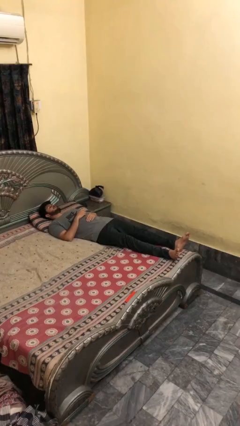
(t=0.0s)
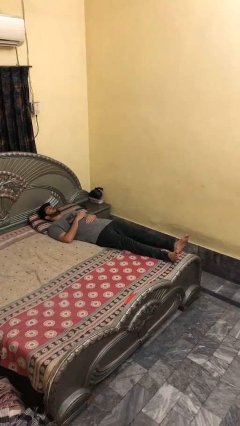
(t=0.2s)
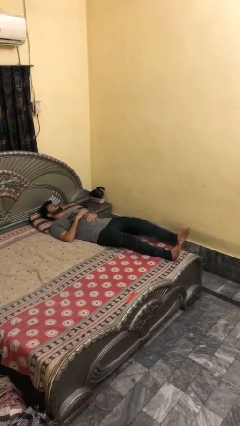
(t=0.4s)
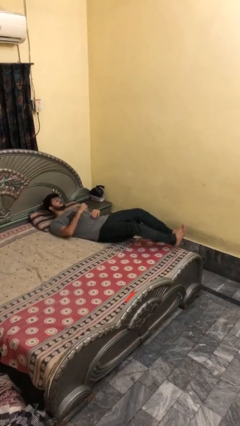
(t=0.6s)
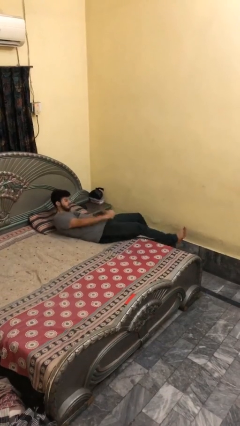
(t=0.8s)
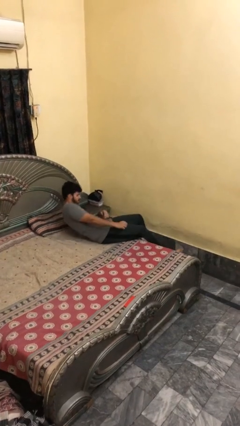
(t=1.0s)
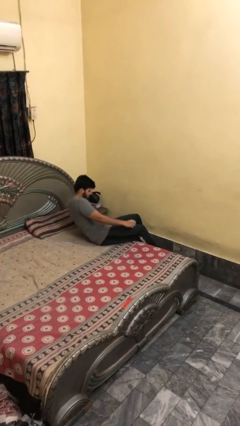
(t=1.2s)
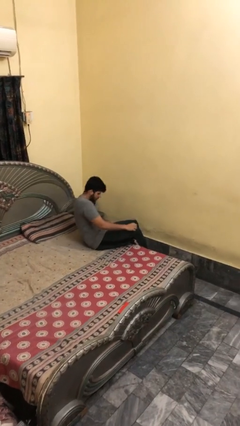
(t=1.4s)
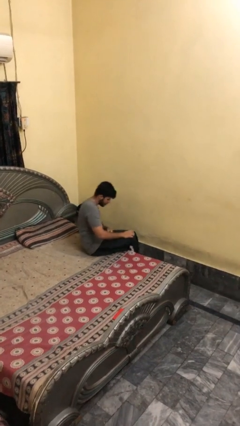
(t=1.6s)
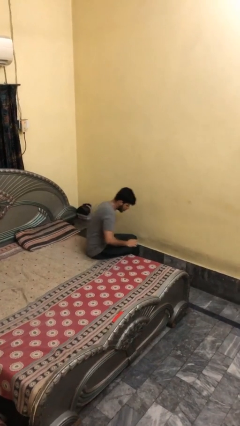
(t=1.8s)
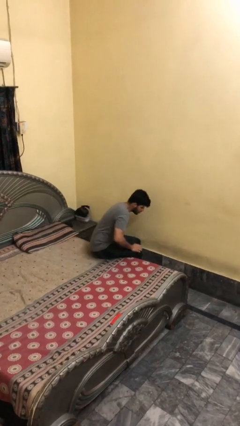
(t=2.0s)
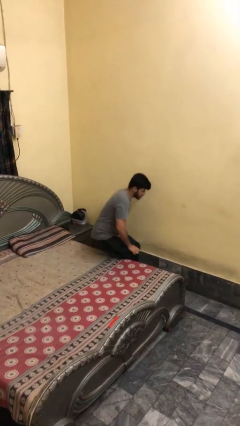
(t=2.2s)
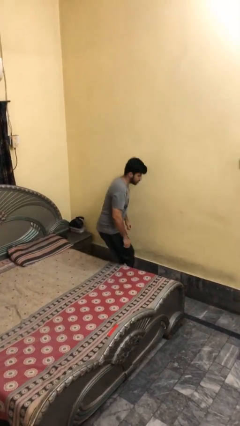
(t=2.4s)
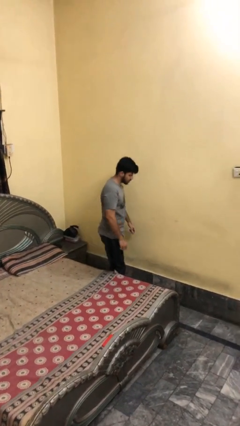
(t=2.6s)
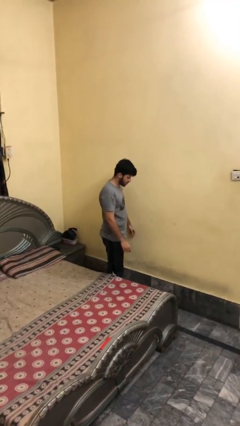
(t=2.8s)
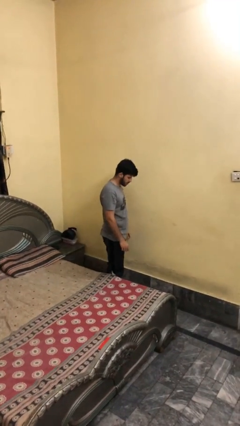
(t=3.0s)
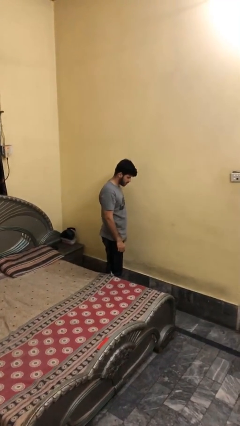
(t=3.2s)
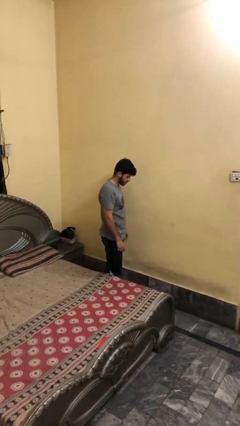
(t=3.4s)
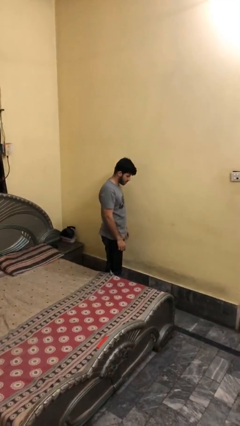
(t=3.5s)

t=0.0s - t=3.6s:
person stands up

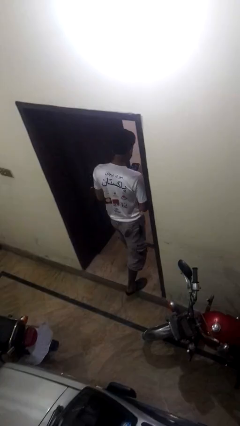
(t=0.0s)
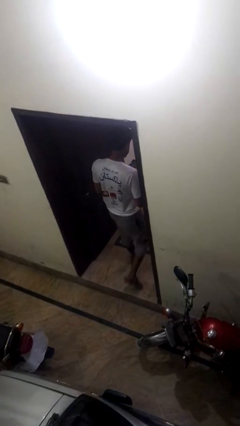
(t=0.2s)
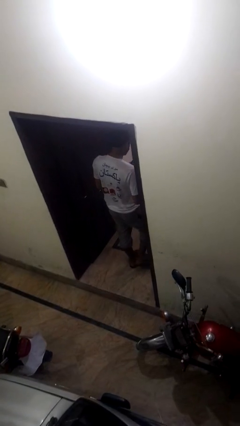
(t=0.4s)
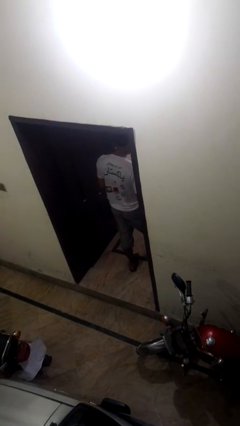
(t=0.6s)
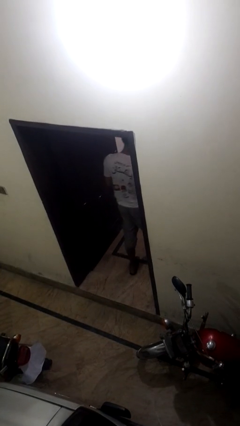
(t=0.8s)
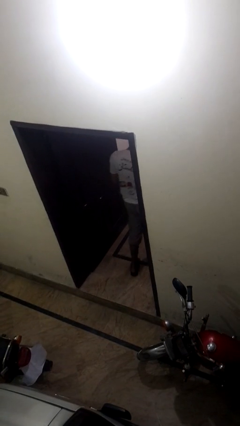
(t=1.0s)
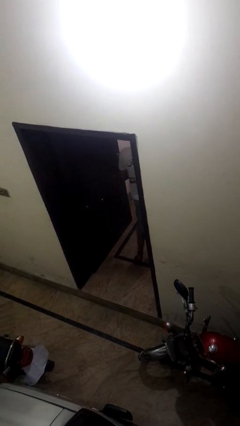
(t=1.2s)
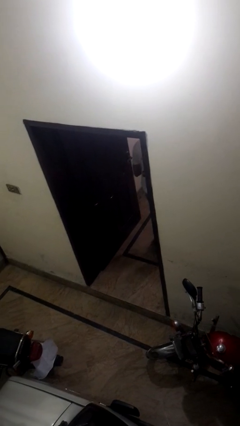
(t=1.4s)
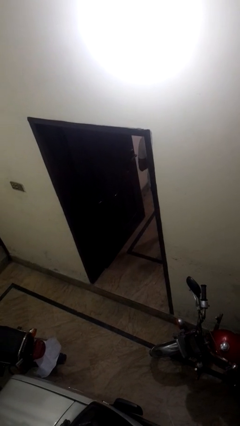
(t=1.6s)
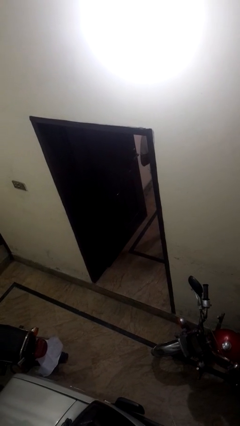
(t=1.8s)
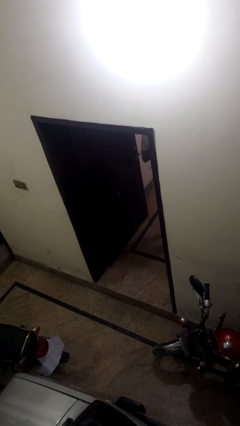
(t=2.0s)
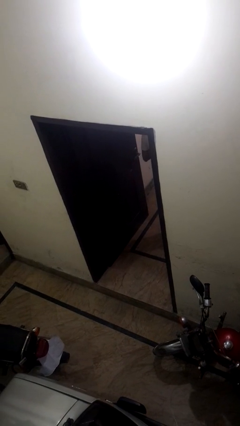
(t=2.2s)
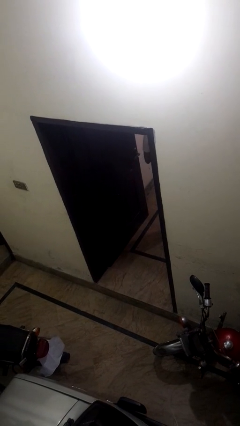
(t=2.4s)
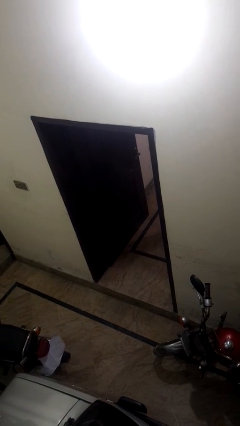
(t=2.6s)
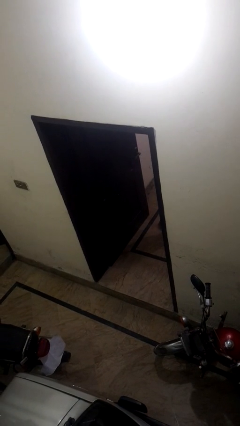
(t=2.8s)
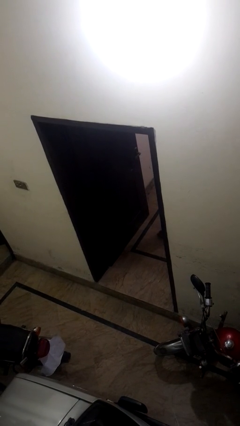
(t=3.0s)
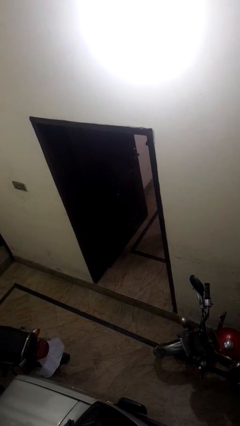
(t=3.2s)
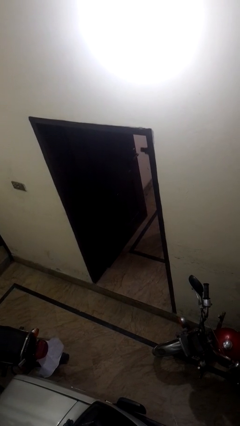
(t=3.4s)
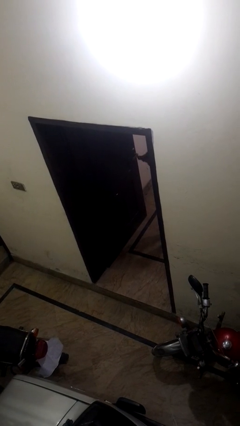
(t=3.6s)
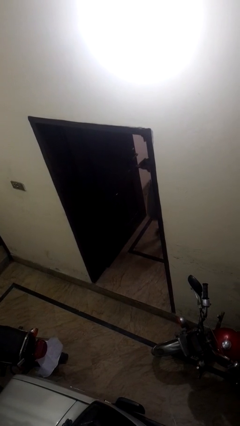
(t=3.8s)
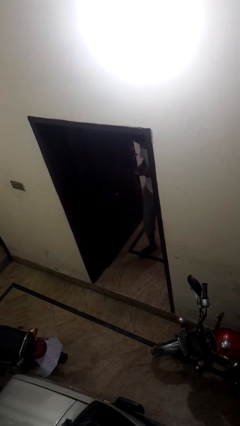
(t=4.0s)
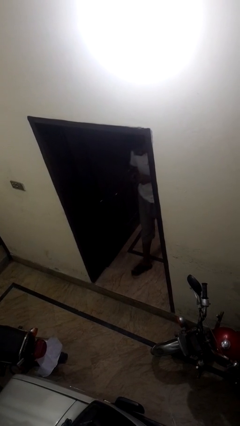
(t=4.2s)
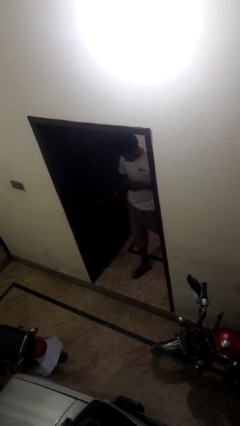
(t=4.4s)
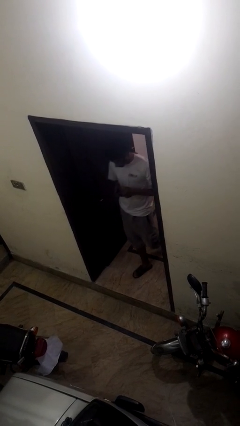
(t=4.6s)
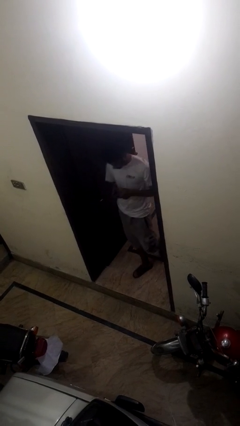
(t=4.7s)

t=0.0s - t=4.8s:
person exits scene through structure

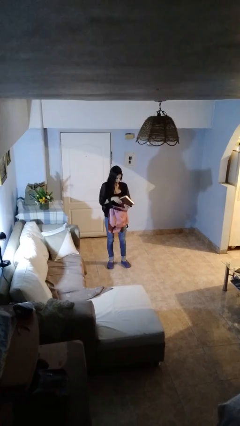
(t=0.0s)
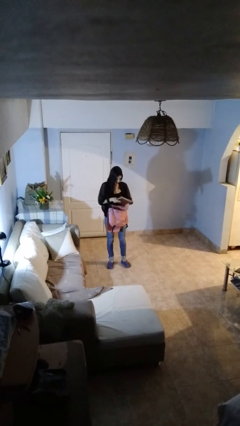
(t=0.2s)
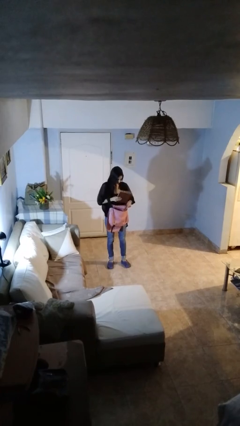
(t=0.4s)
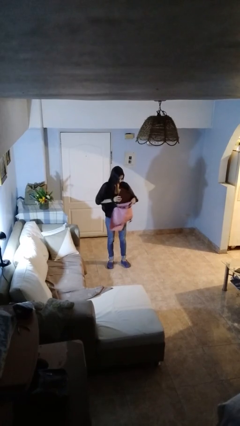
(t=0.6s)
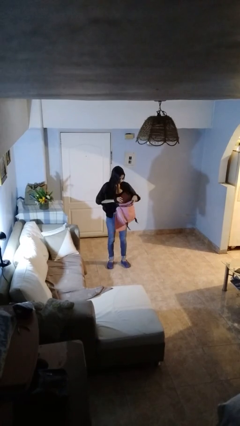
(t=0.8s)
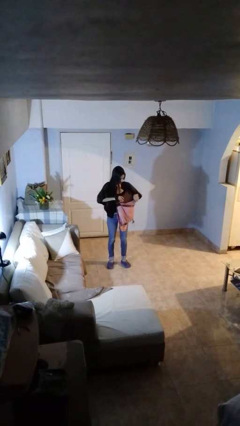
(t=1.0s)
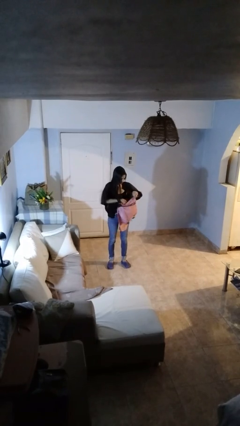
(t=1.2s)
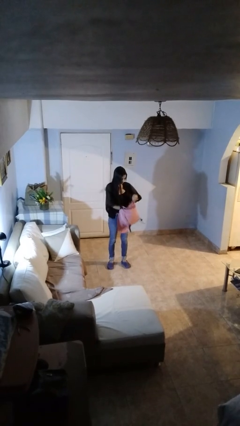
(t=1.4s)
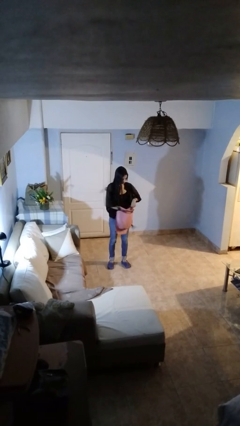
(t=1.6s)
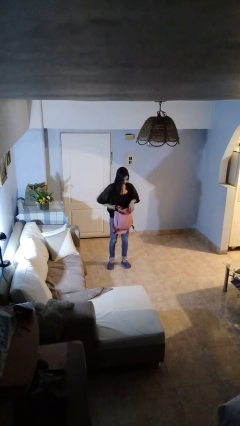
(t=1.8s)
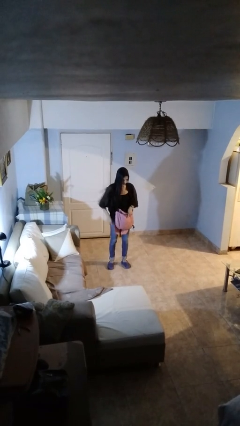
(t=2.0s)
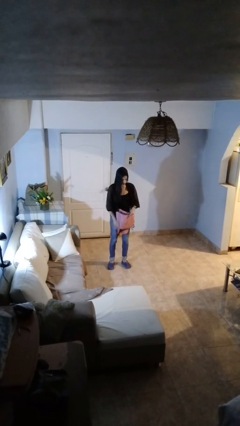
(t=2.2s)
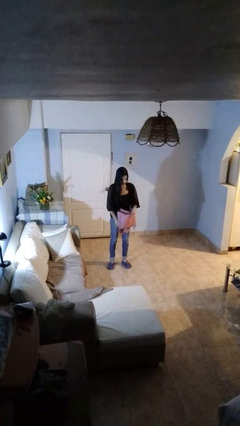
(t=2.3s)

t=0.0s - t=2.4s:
person puts object into backpack

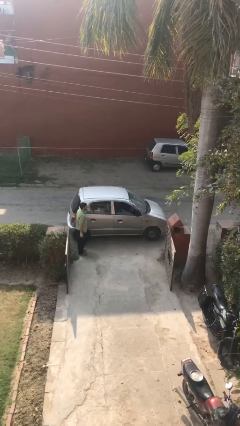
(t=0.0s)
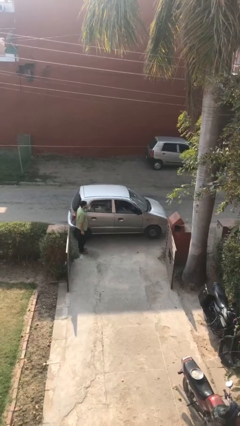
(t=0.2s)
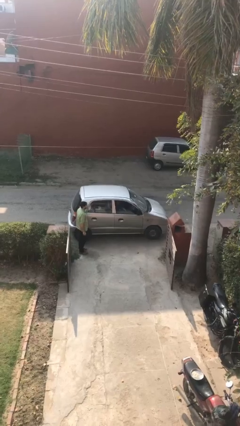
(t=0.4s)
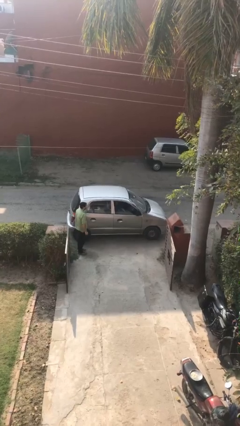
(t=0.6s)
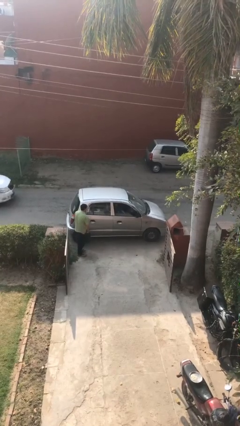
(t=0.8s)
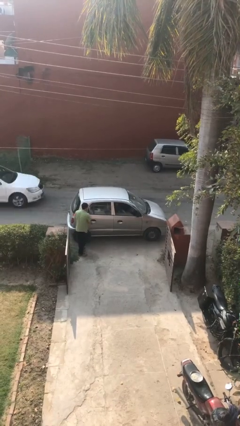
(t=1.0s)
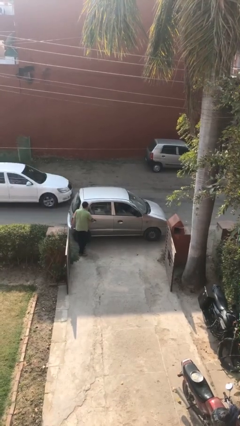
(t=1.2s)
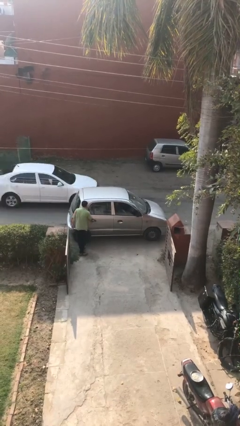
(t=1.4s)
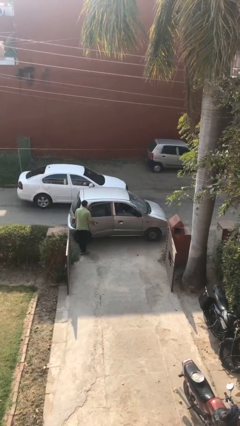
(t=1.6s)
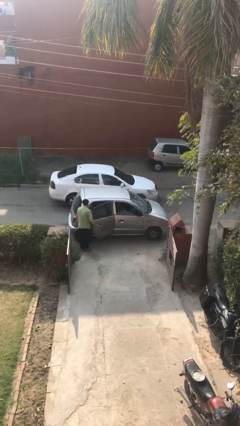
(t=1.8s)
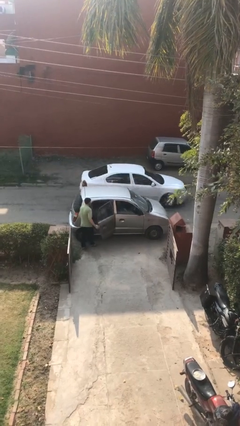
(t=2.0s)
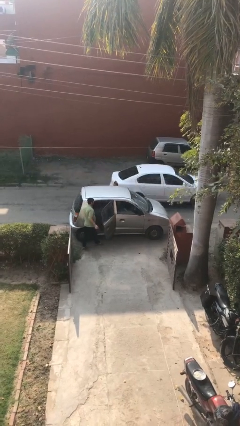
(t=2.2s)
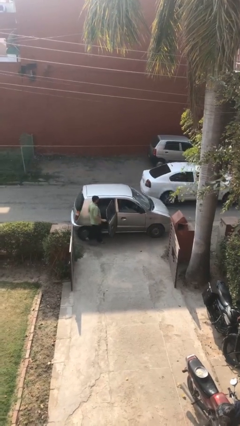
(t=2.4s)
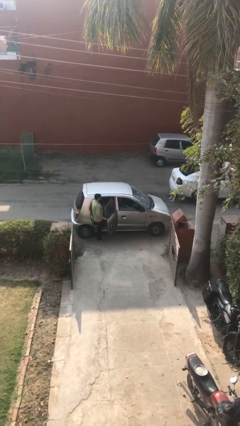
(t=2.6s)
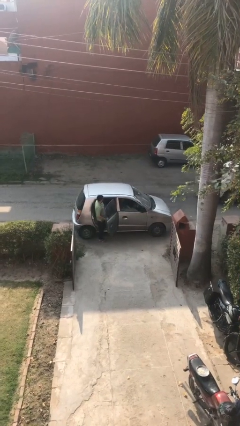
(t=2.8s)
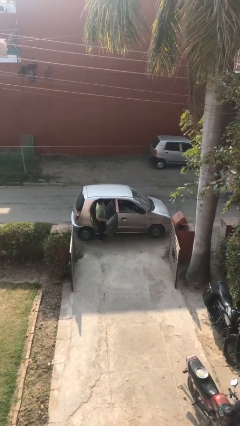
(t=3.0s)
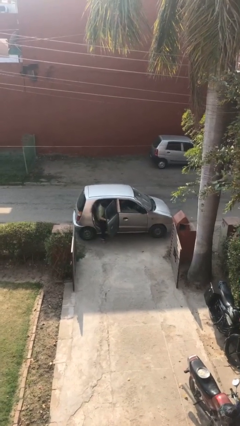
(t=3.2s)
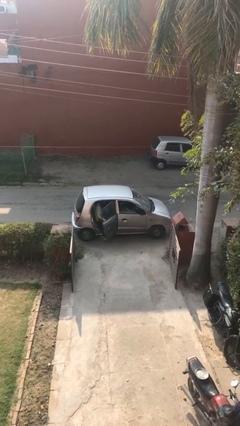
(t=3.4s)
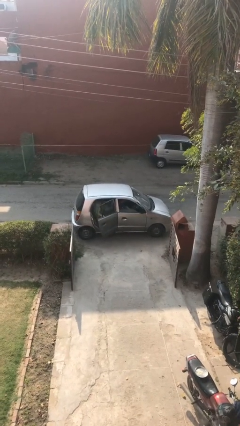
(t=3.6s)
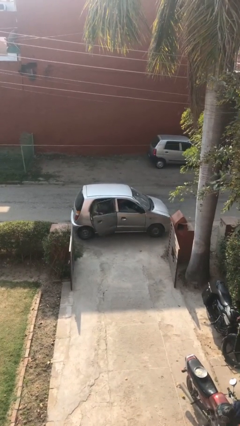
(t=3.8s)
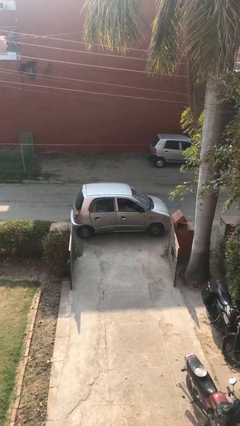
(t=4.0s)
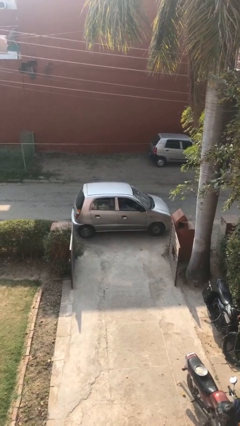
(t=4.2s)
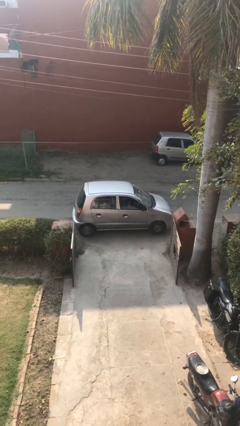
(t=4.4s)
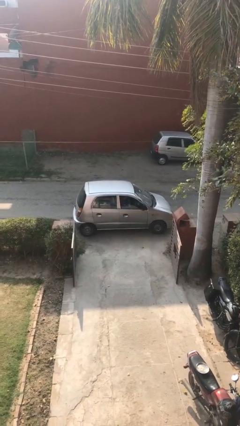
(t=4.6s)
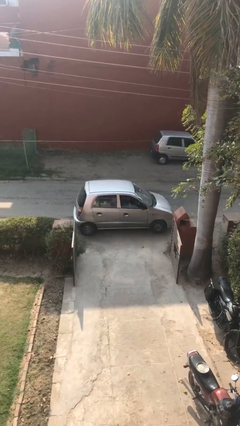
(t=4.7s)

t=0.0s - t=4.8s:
car picks up person

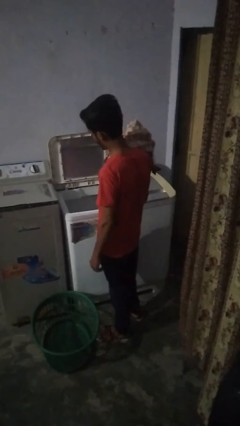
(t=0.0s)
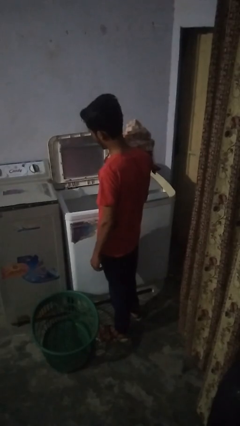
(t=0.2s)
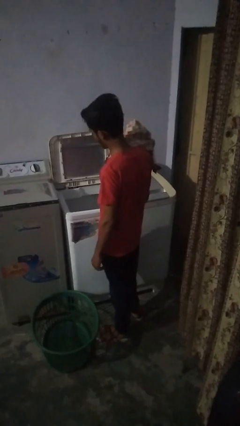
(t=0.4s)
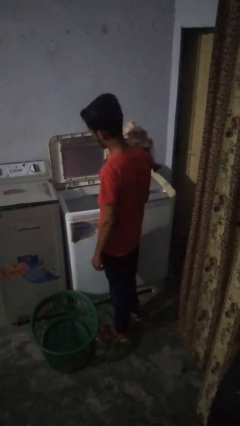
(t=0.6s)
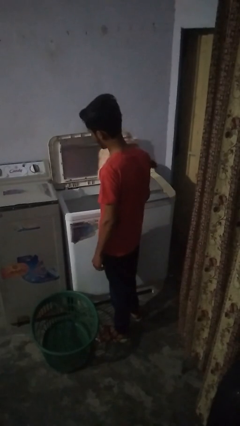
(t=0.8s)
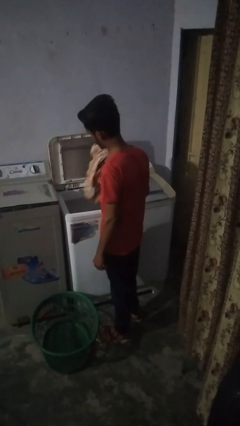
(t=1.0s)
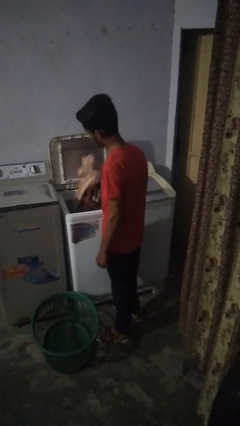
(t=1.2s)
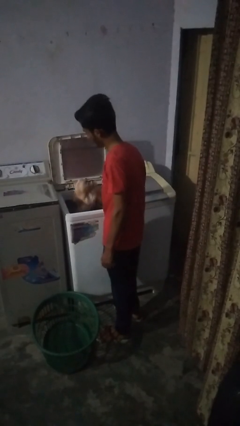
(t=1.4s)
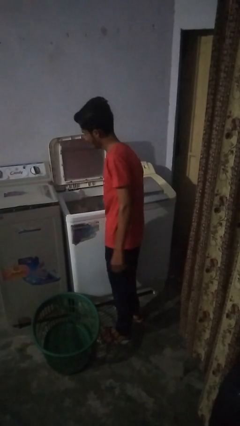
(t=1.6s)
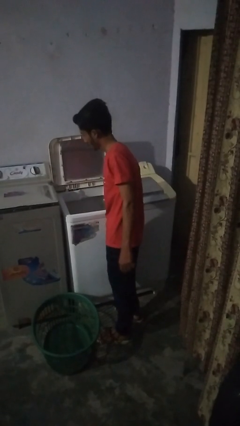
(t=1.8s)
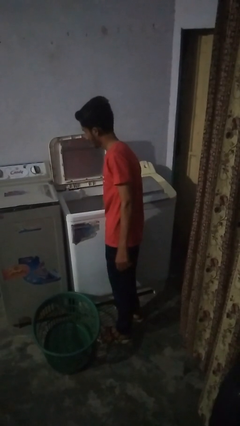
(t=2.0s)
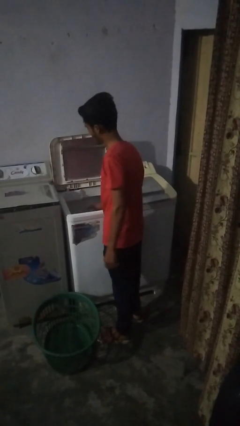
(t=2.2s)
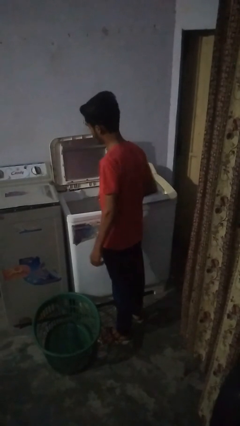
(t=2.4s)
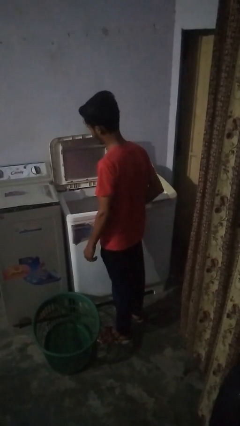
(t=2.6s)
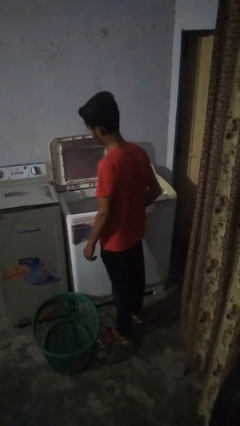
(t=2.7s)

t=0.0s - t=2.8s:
person loads clotheswasher
